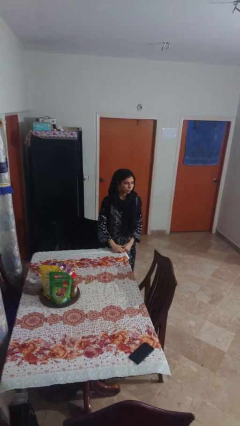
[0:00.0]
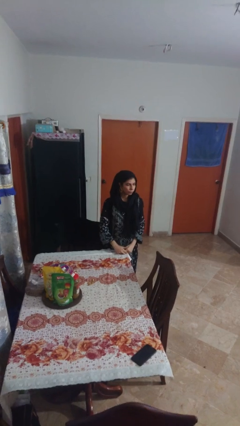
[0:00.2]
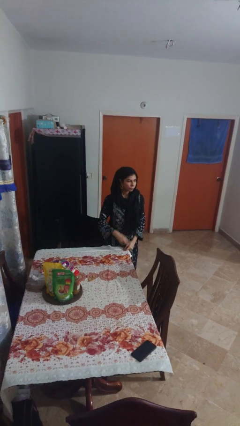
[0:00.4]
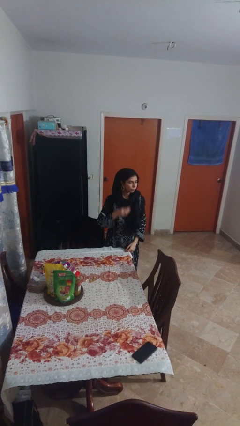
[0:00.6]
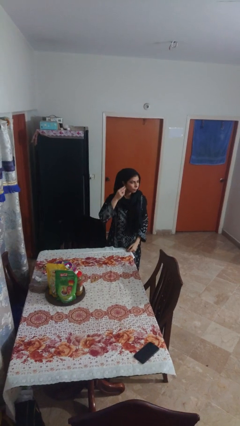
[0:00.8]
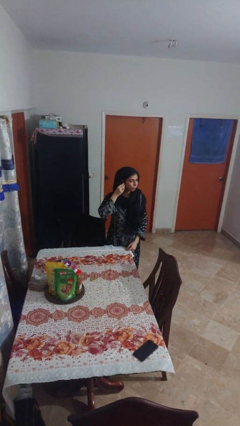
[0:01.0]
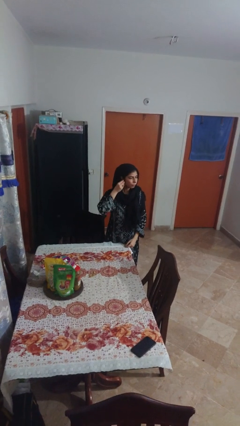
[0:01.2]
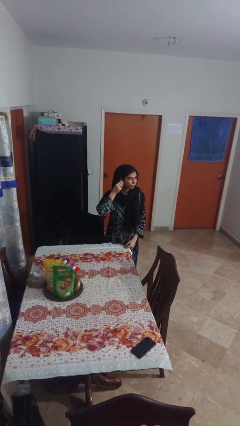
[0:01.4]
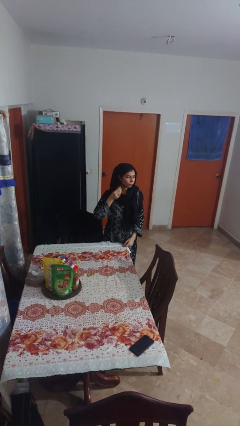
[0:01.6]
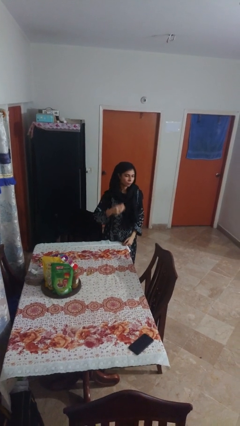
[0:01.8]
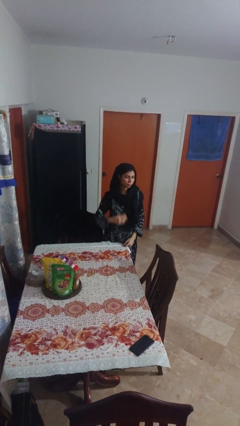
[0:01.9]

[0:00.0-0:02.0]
person takes off earrings

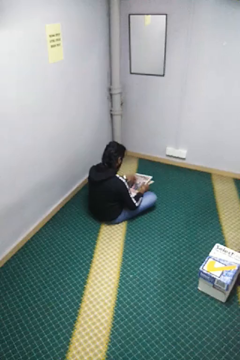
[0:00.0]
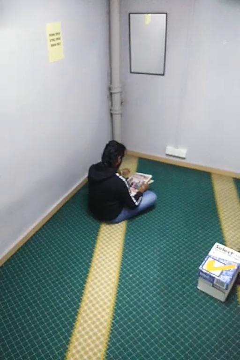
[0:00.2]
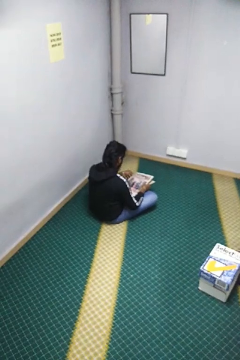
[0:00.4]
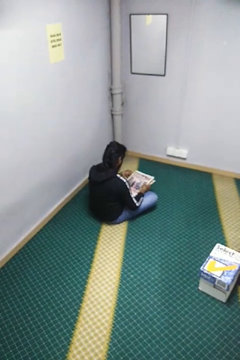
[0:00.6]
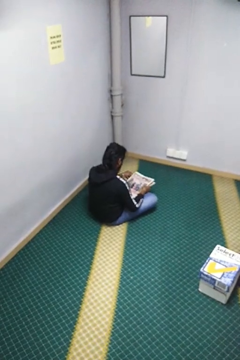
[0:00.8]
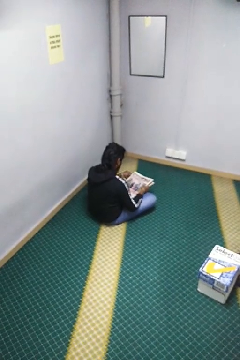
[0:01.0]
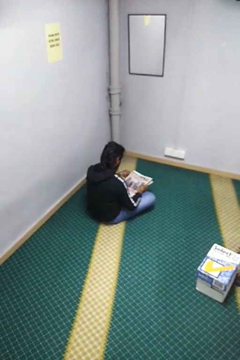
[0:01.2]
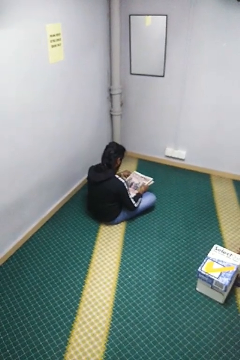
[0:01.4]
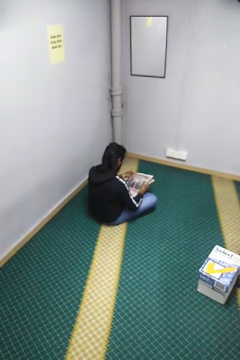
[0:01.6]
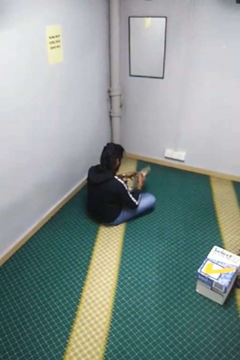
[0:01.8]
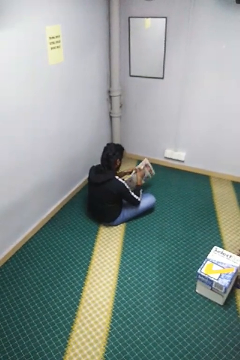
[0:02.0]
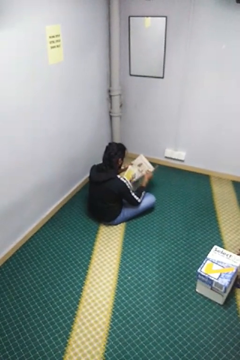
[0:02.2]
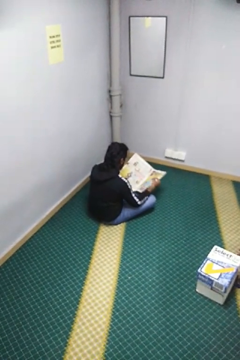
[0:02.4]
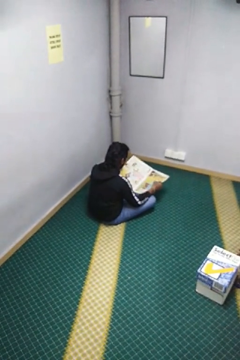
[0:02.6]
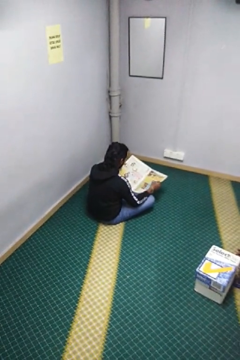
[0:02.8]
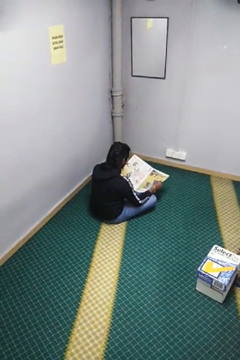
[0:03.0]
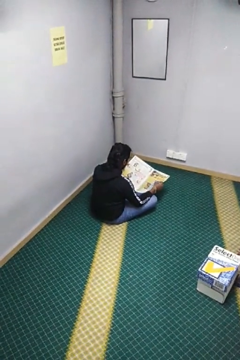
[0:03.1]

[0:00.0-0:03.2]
person reads newspaper

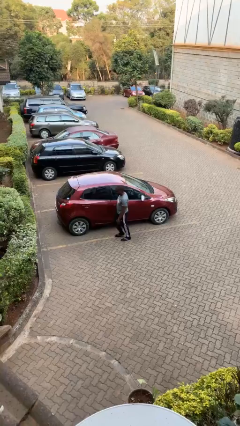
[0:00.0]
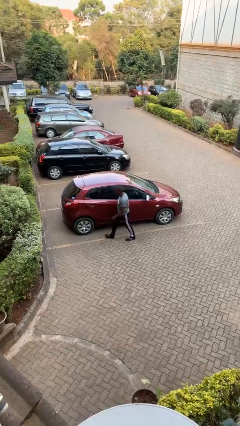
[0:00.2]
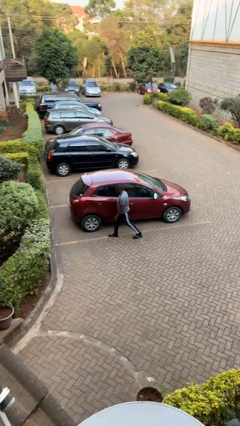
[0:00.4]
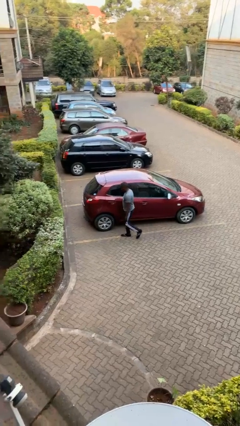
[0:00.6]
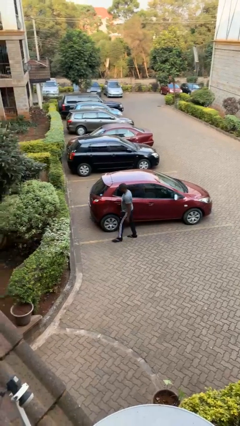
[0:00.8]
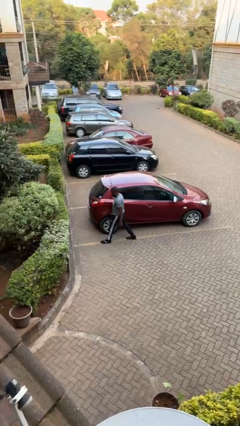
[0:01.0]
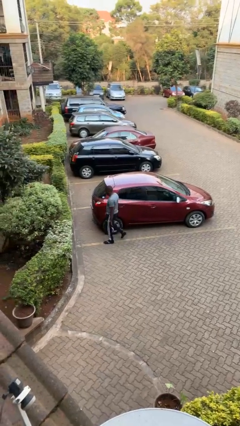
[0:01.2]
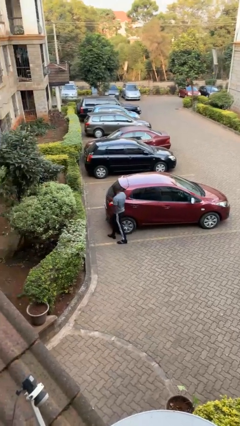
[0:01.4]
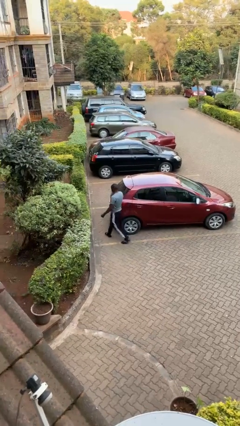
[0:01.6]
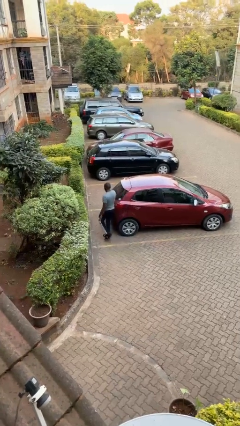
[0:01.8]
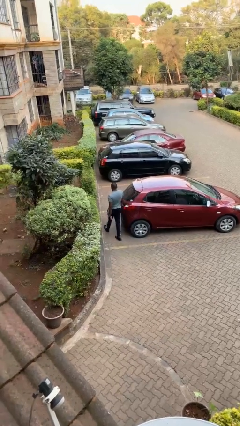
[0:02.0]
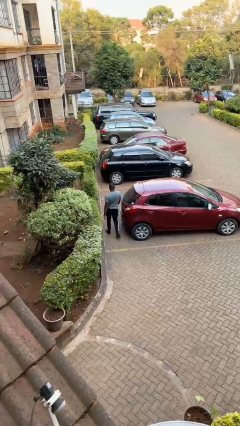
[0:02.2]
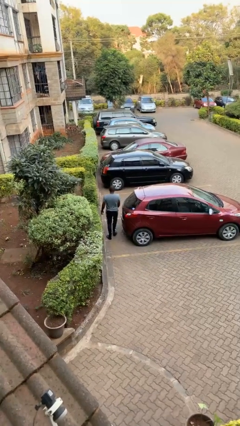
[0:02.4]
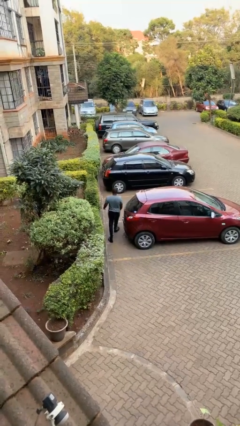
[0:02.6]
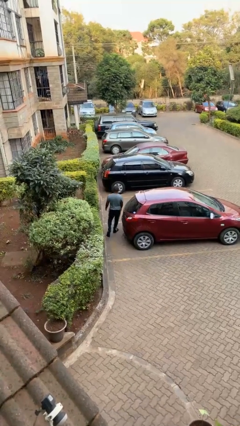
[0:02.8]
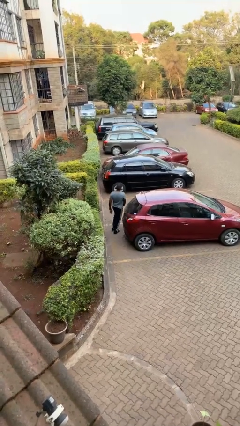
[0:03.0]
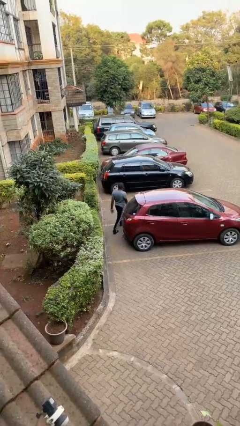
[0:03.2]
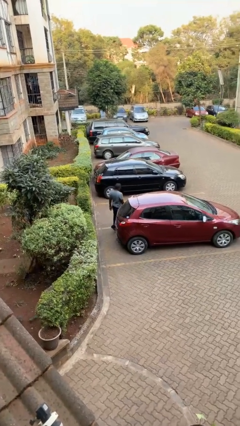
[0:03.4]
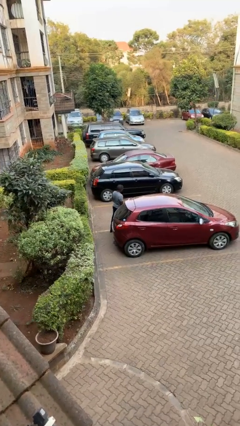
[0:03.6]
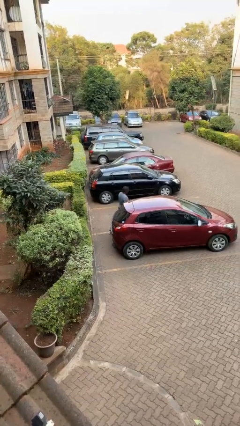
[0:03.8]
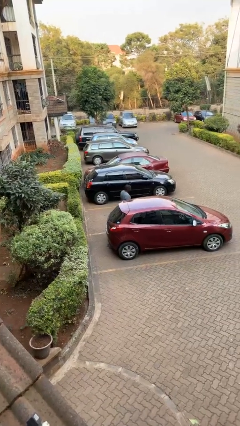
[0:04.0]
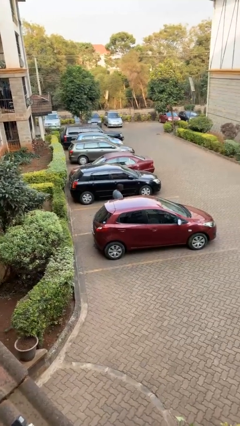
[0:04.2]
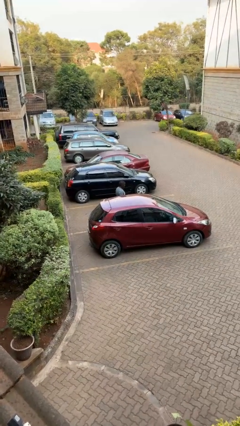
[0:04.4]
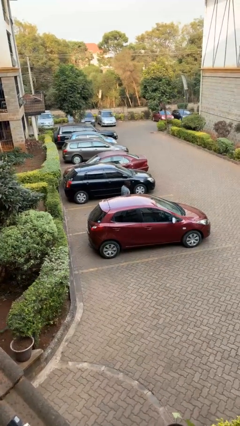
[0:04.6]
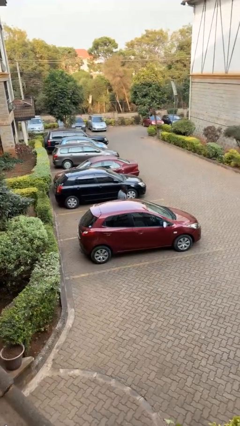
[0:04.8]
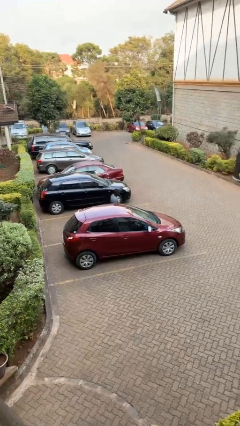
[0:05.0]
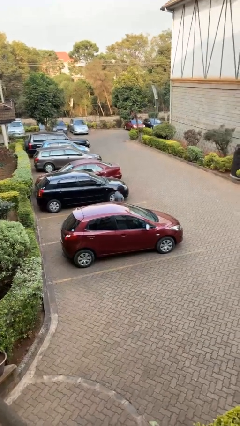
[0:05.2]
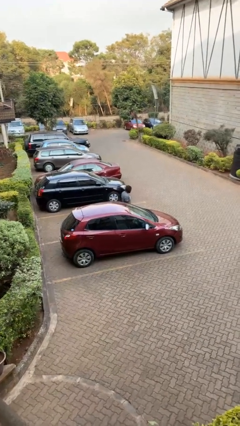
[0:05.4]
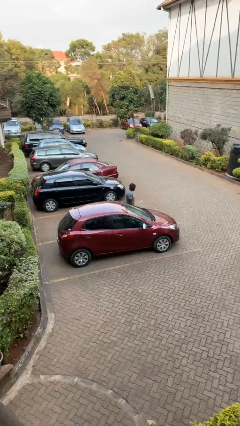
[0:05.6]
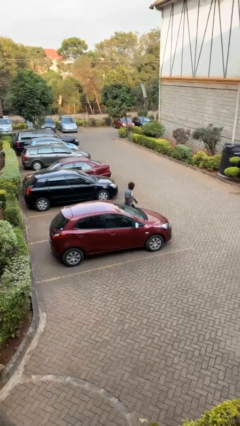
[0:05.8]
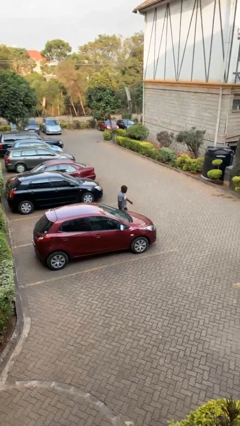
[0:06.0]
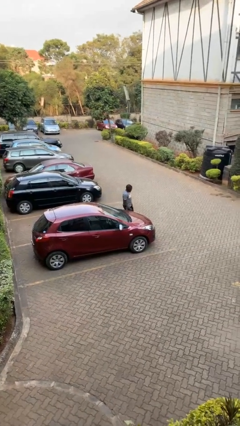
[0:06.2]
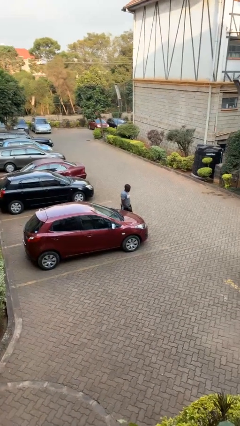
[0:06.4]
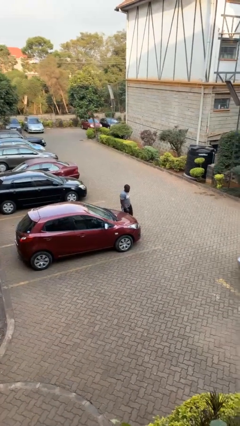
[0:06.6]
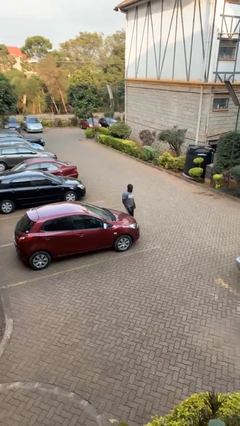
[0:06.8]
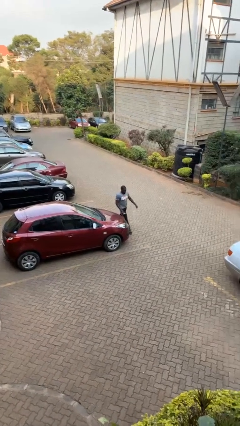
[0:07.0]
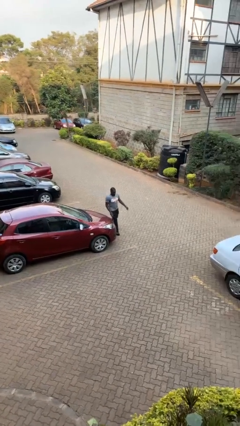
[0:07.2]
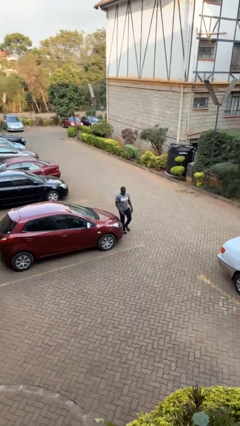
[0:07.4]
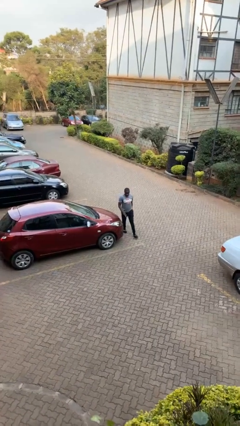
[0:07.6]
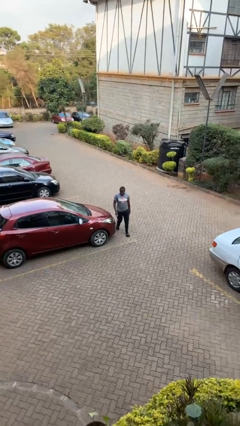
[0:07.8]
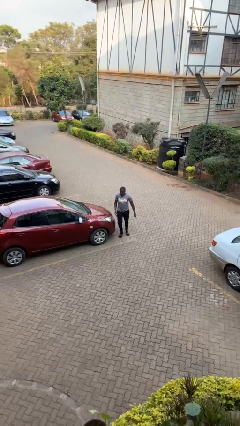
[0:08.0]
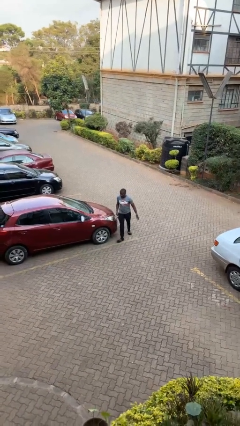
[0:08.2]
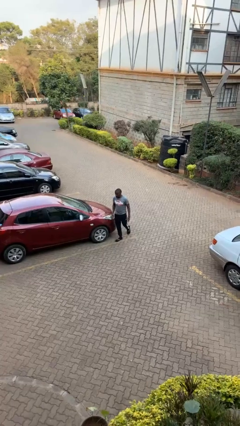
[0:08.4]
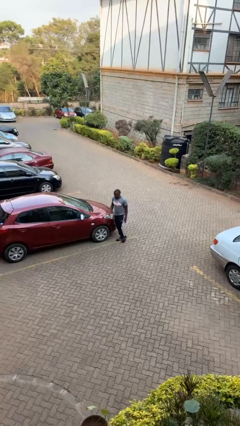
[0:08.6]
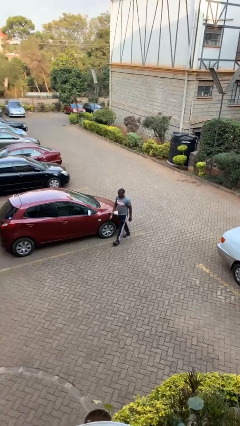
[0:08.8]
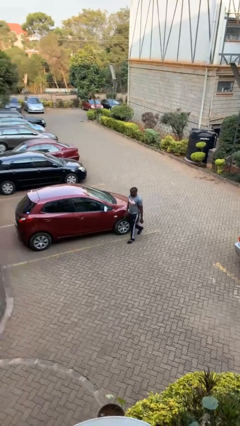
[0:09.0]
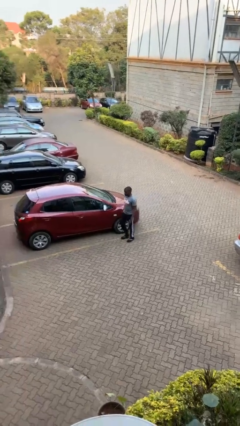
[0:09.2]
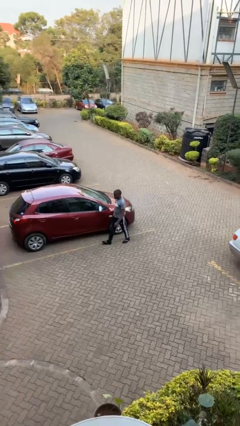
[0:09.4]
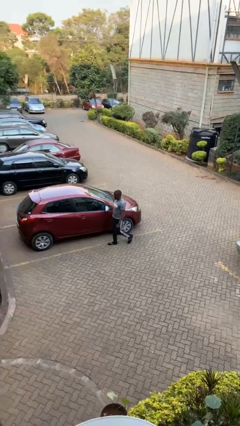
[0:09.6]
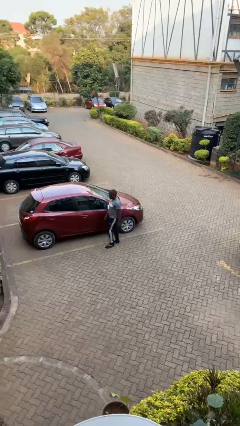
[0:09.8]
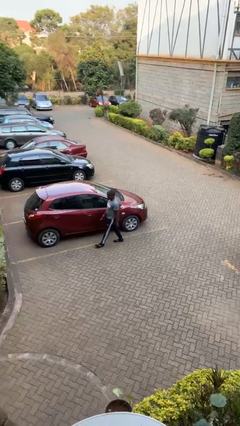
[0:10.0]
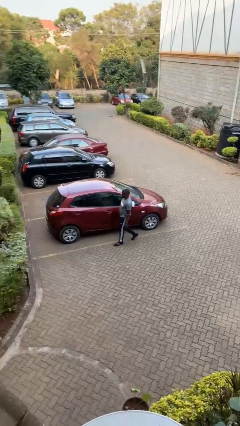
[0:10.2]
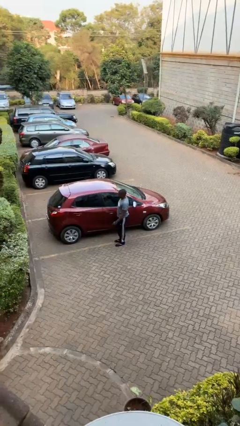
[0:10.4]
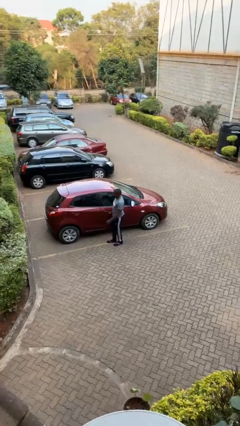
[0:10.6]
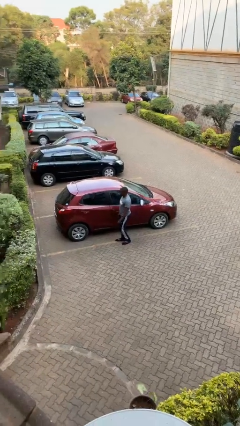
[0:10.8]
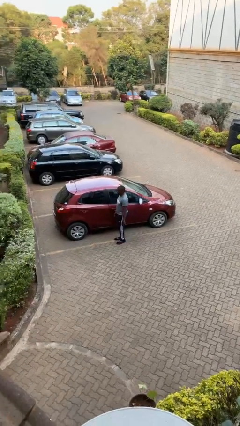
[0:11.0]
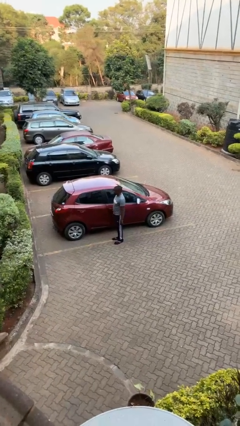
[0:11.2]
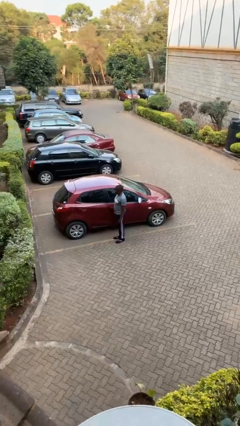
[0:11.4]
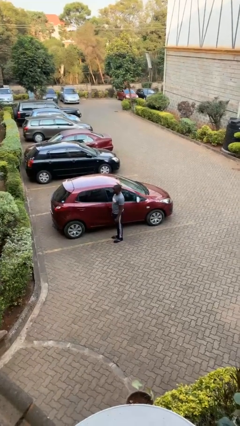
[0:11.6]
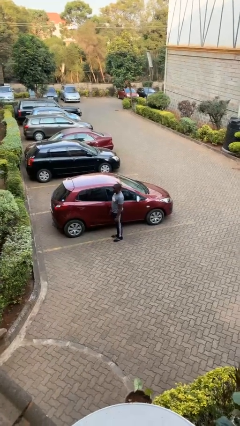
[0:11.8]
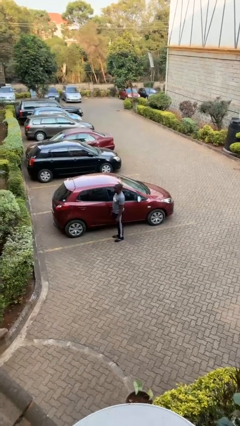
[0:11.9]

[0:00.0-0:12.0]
person walks around car

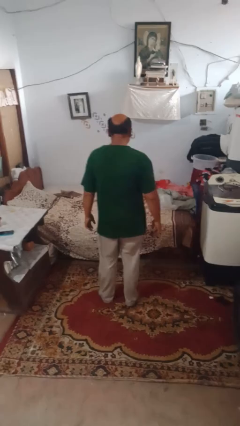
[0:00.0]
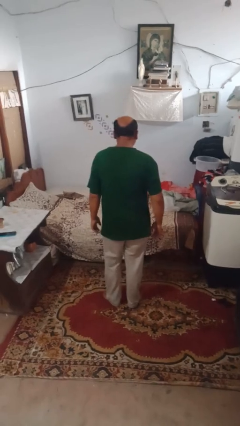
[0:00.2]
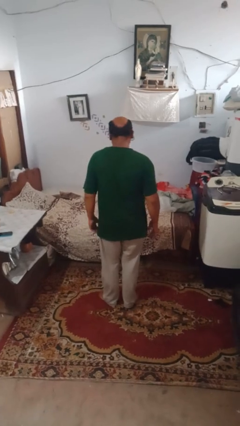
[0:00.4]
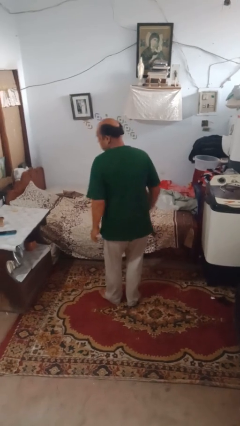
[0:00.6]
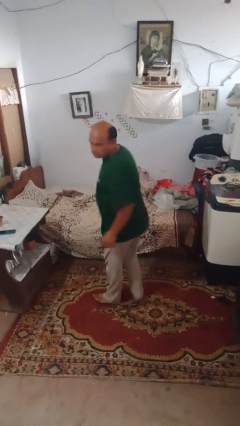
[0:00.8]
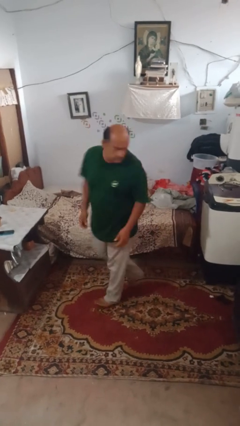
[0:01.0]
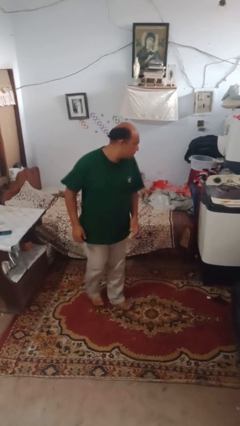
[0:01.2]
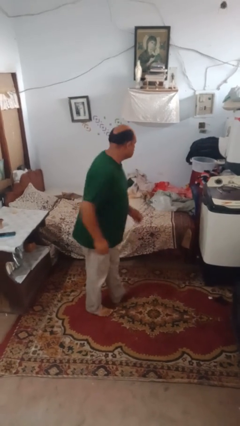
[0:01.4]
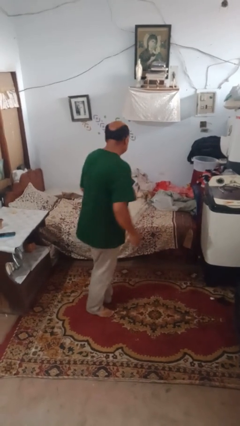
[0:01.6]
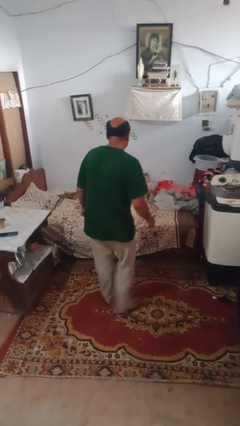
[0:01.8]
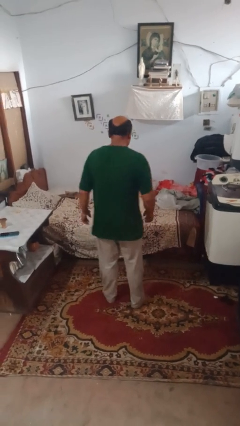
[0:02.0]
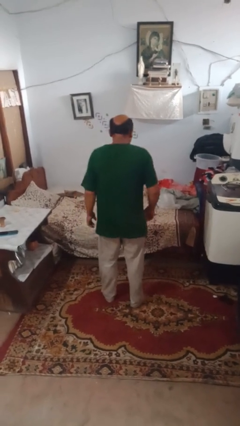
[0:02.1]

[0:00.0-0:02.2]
person twirls
